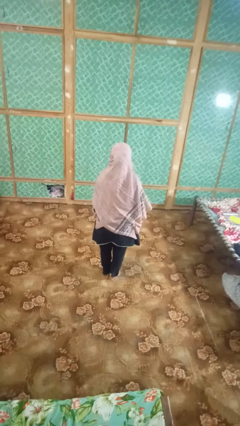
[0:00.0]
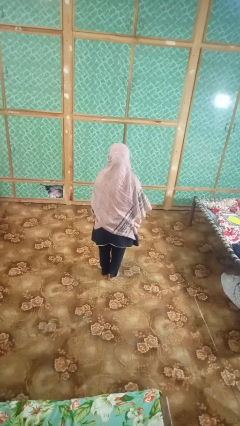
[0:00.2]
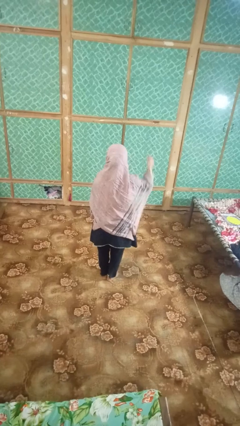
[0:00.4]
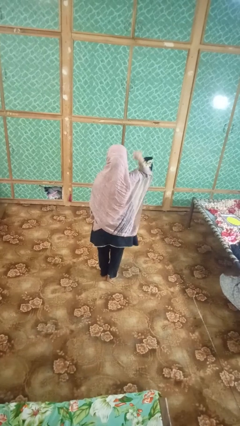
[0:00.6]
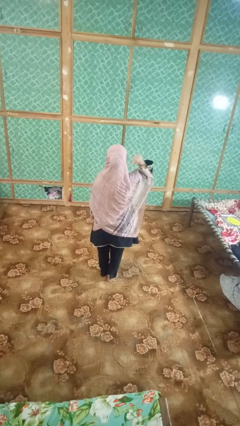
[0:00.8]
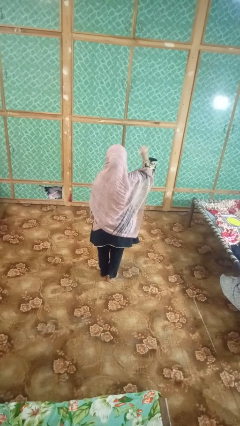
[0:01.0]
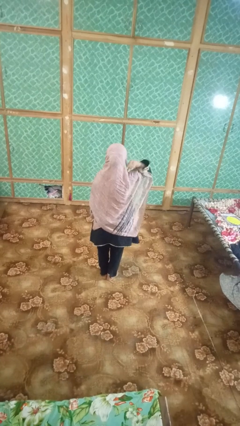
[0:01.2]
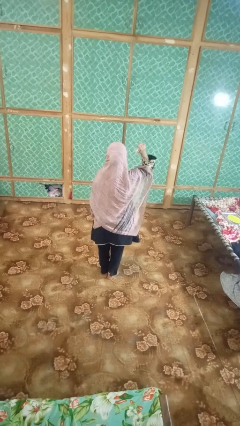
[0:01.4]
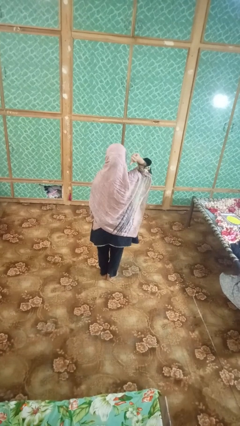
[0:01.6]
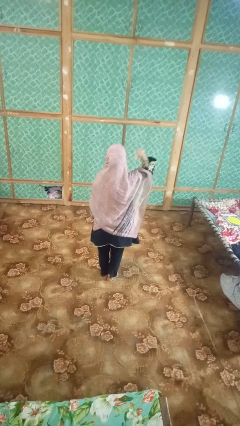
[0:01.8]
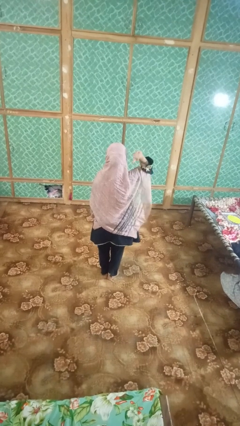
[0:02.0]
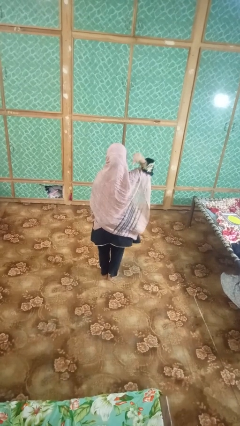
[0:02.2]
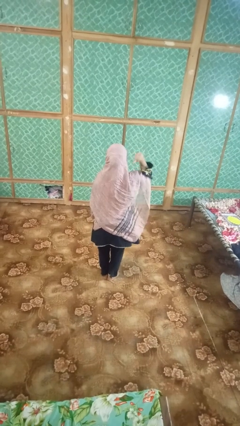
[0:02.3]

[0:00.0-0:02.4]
person gestures behind me

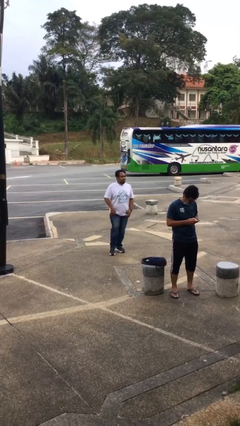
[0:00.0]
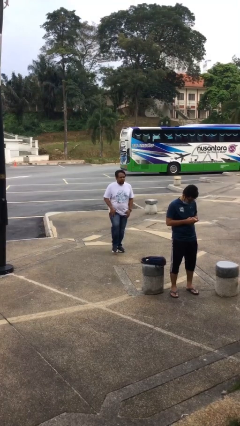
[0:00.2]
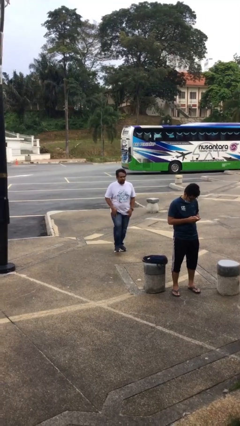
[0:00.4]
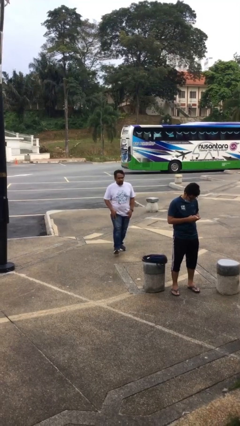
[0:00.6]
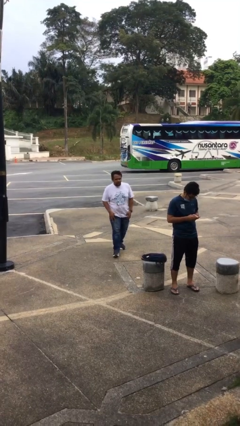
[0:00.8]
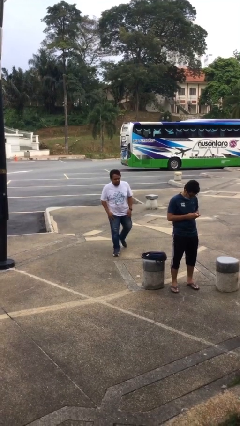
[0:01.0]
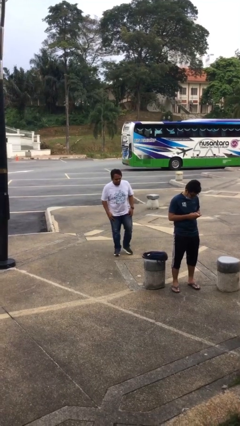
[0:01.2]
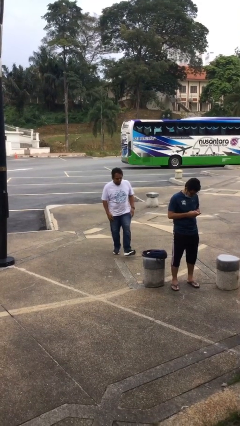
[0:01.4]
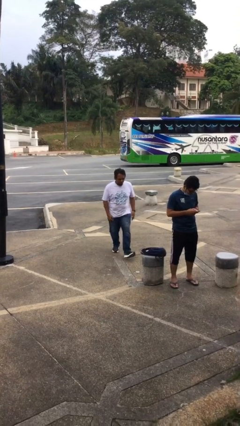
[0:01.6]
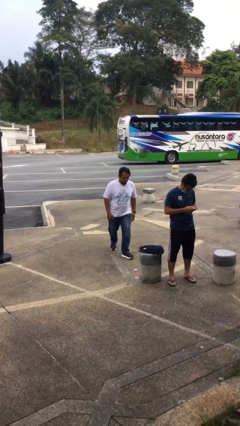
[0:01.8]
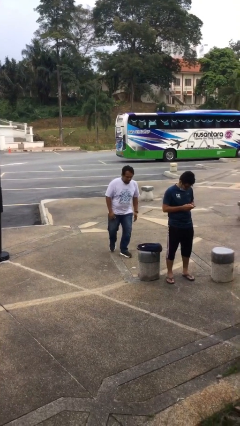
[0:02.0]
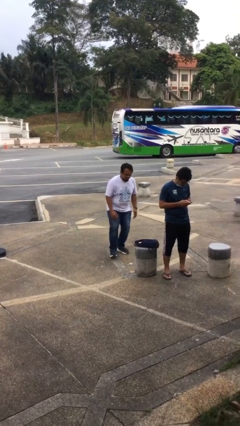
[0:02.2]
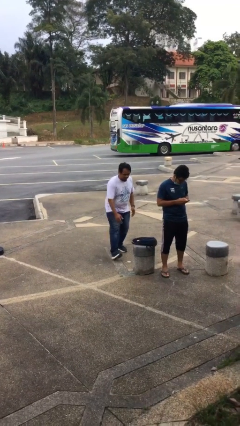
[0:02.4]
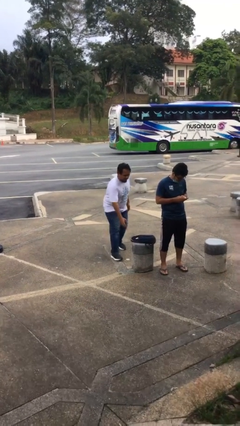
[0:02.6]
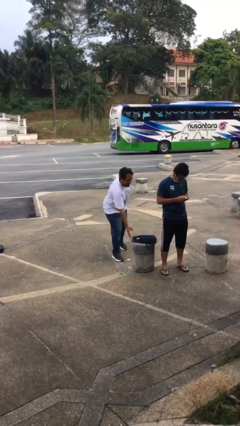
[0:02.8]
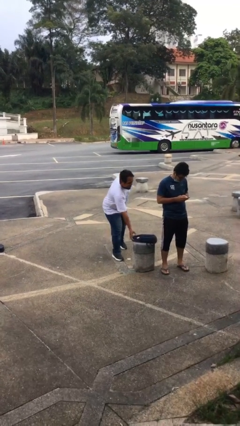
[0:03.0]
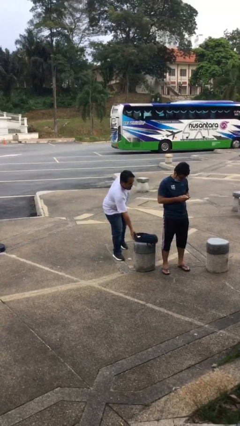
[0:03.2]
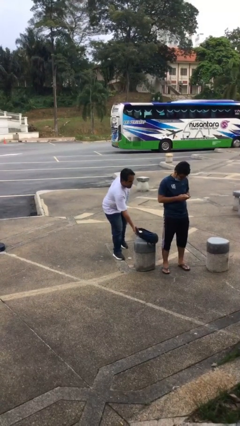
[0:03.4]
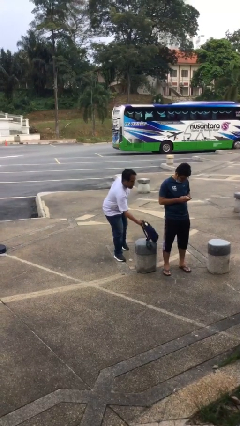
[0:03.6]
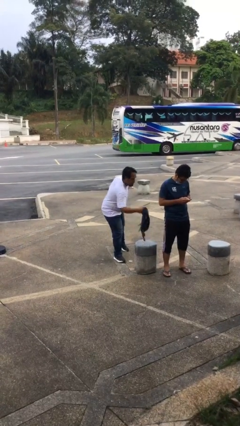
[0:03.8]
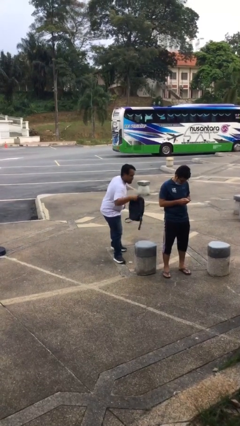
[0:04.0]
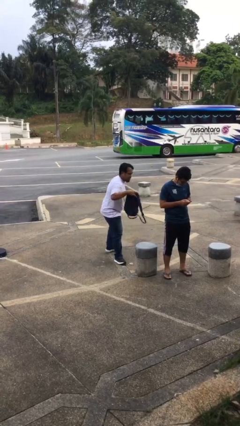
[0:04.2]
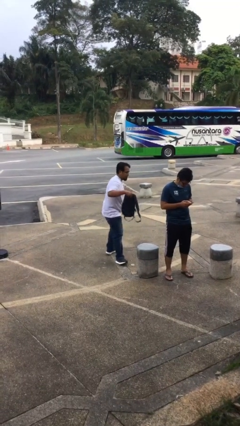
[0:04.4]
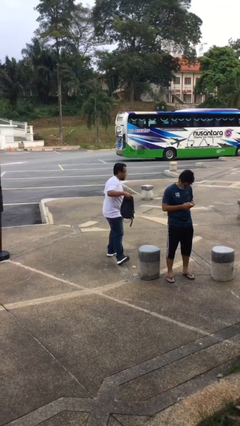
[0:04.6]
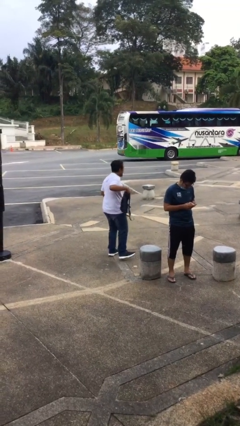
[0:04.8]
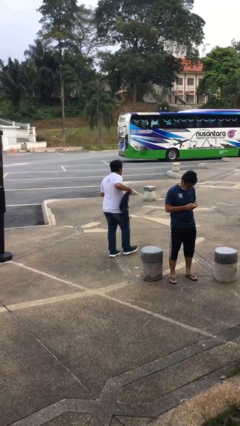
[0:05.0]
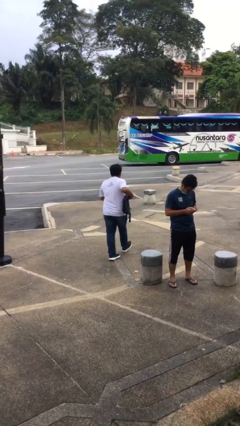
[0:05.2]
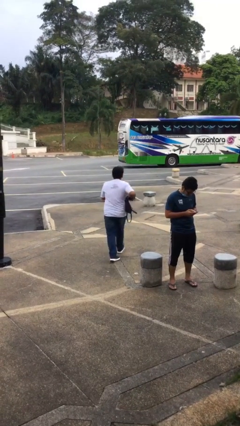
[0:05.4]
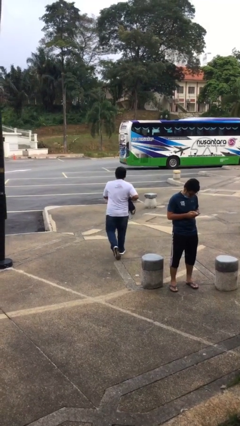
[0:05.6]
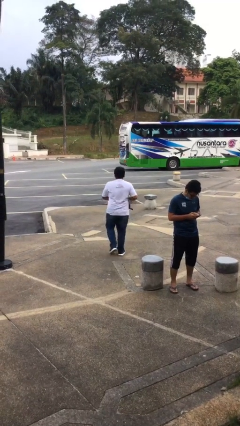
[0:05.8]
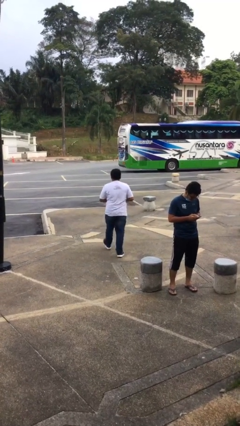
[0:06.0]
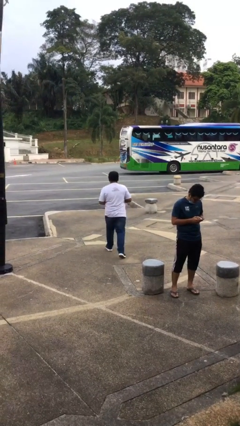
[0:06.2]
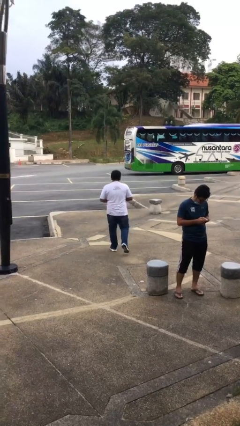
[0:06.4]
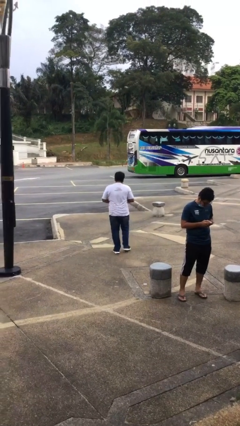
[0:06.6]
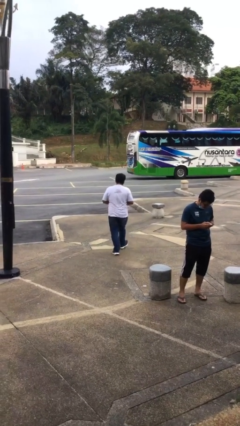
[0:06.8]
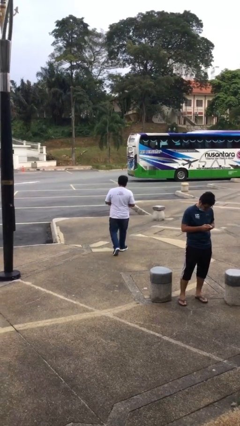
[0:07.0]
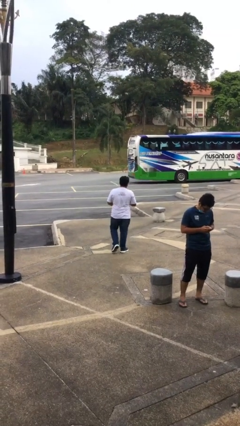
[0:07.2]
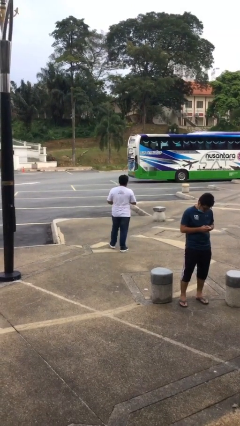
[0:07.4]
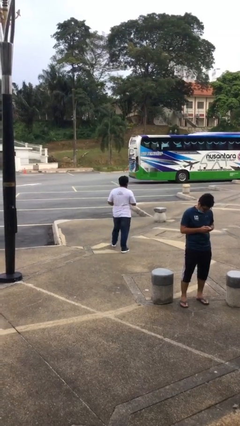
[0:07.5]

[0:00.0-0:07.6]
person steals object from person

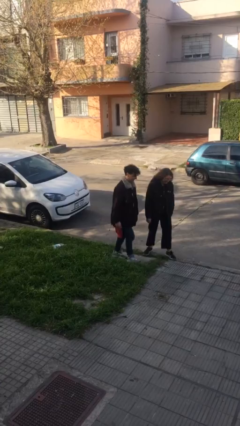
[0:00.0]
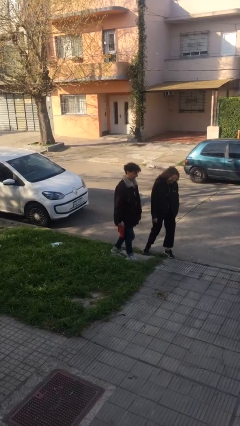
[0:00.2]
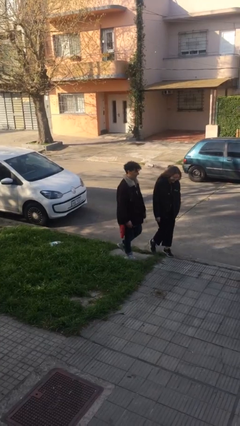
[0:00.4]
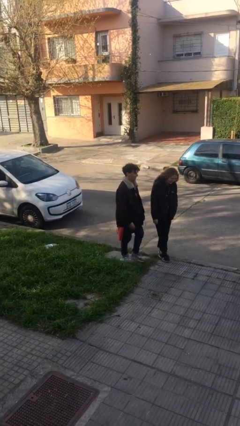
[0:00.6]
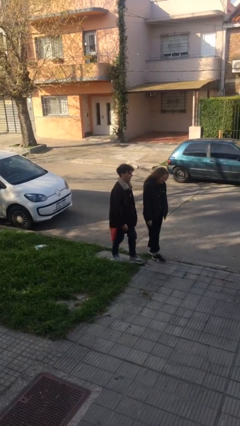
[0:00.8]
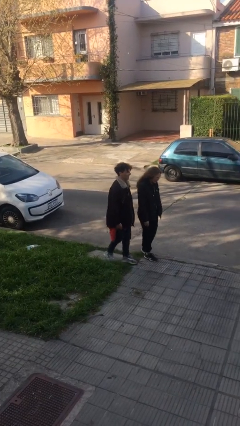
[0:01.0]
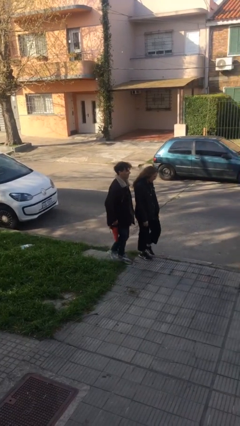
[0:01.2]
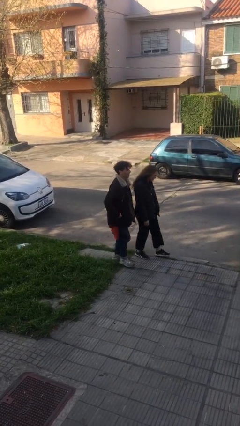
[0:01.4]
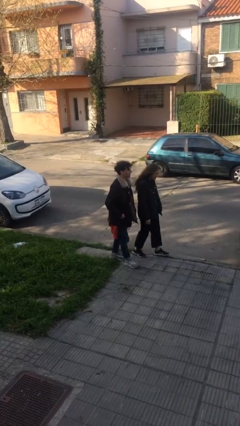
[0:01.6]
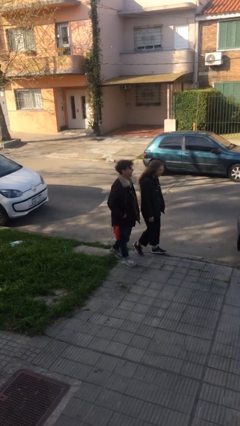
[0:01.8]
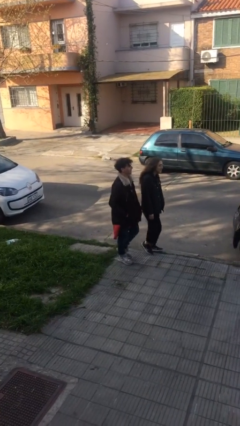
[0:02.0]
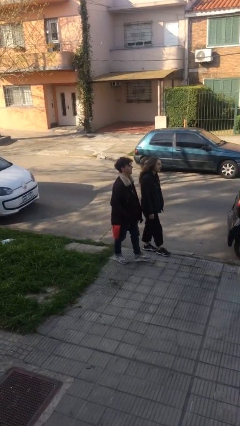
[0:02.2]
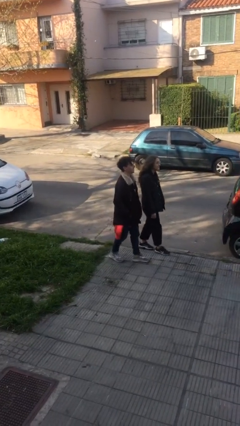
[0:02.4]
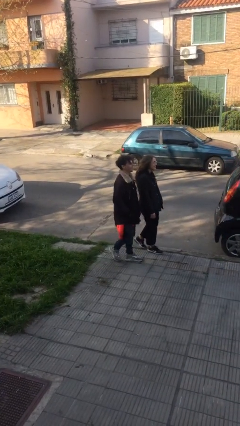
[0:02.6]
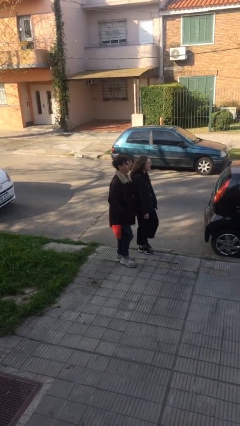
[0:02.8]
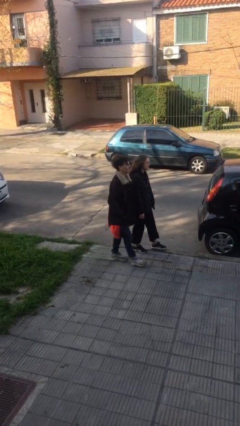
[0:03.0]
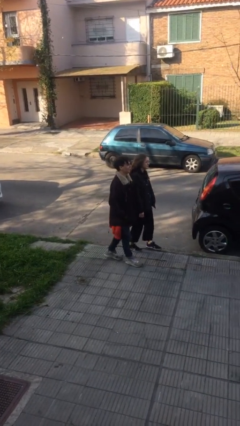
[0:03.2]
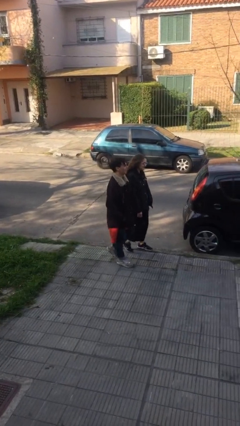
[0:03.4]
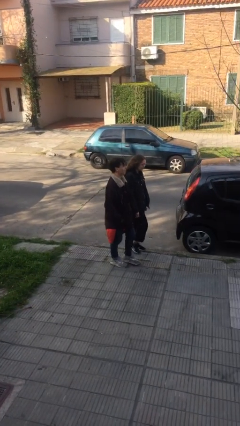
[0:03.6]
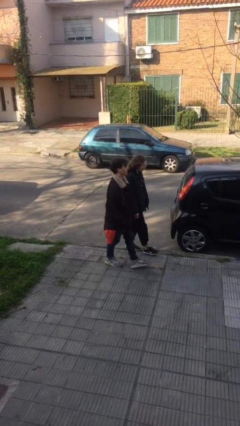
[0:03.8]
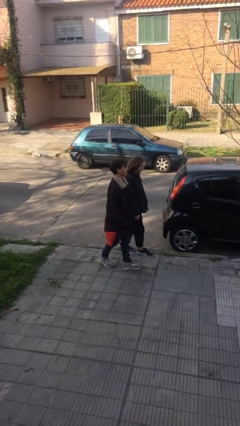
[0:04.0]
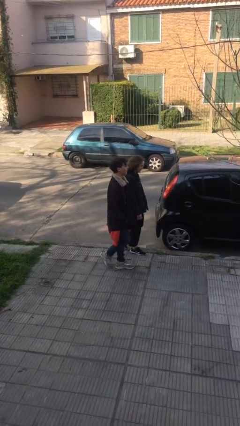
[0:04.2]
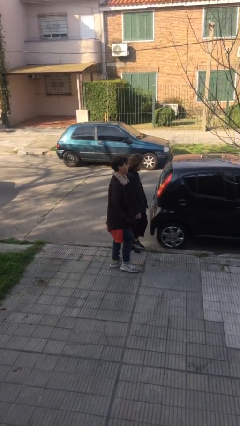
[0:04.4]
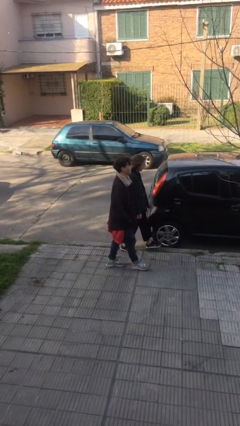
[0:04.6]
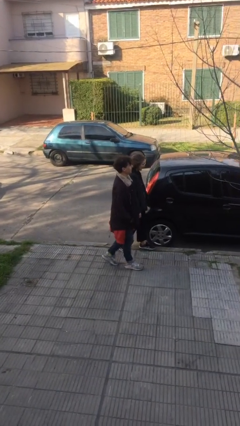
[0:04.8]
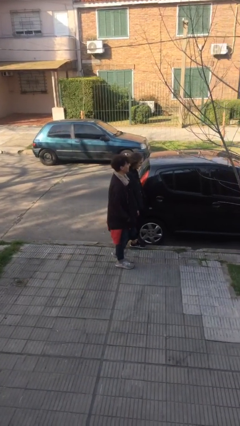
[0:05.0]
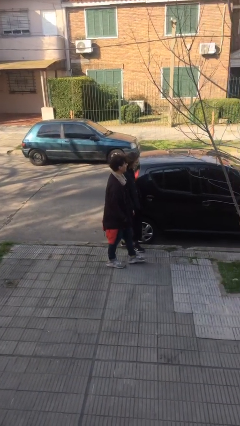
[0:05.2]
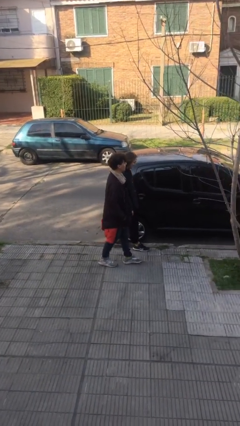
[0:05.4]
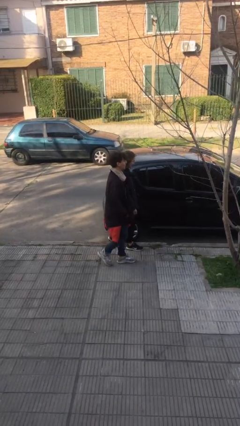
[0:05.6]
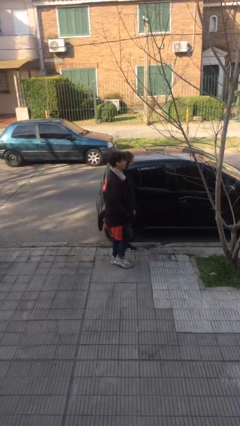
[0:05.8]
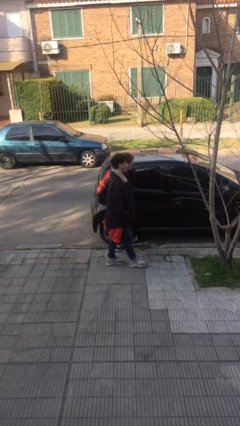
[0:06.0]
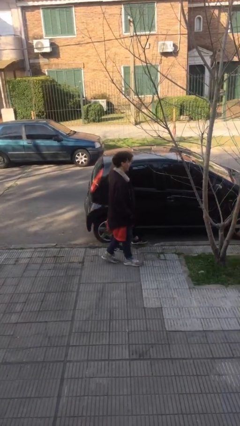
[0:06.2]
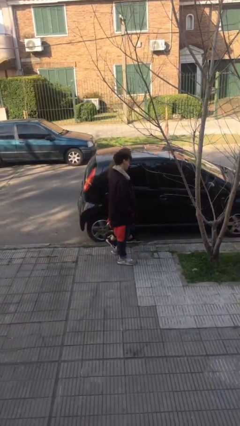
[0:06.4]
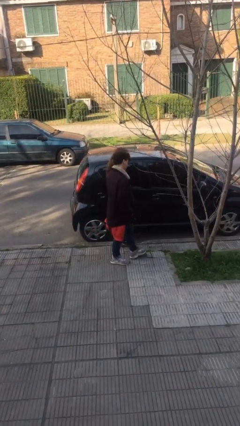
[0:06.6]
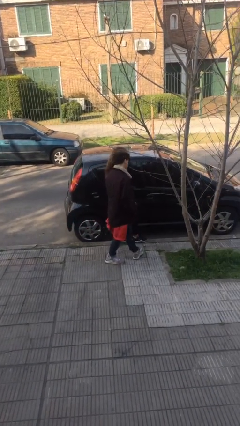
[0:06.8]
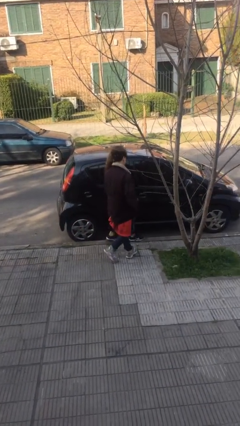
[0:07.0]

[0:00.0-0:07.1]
person talks to person

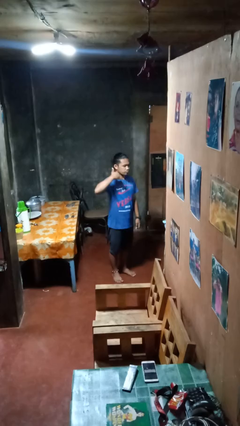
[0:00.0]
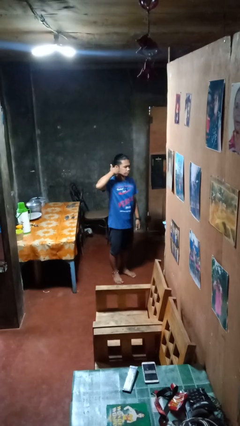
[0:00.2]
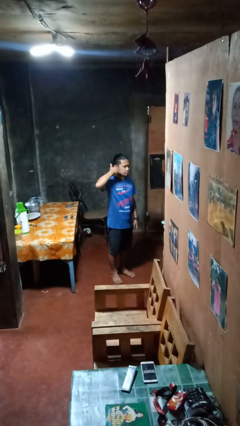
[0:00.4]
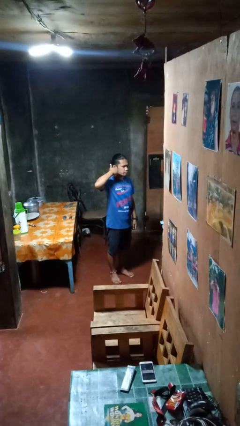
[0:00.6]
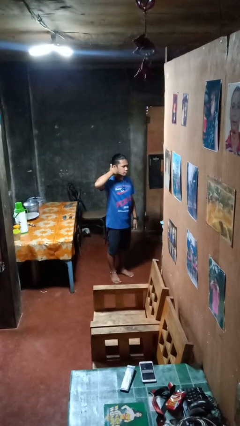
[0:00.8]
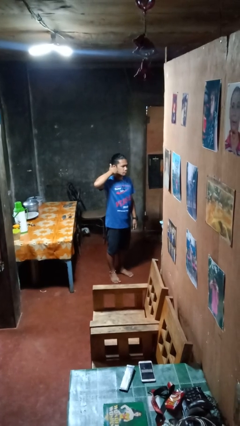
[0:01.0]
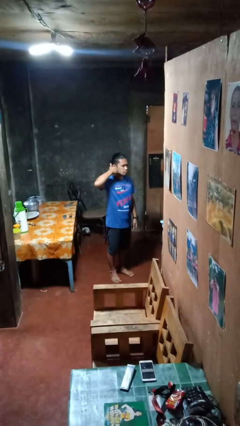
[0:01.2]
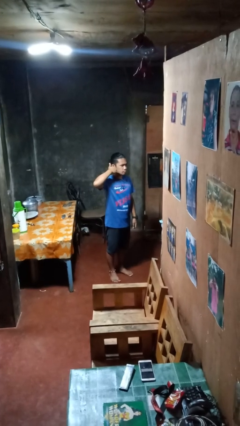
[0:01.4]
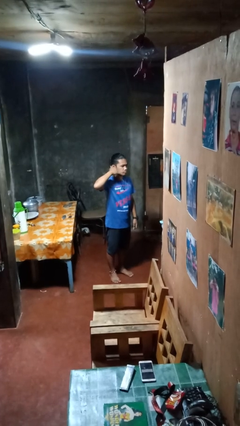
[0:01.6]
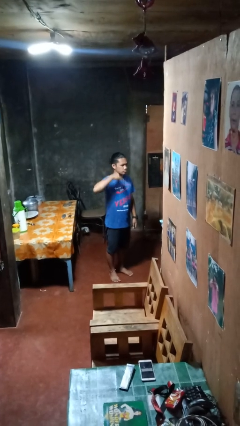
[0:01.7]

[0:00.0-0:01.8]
person gestures call me
